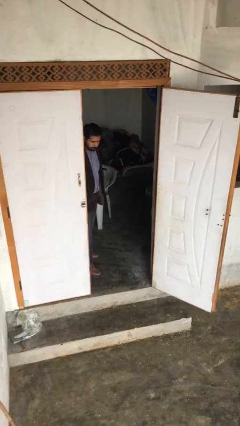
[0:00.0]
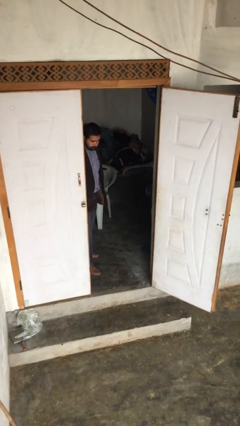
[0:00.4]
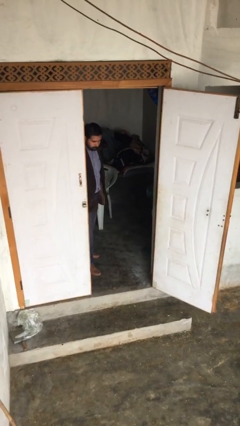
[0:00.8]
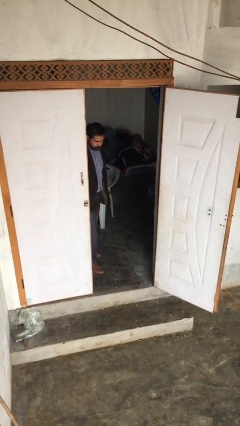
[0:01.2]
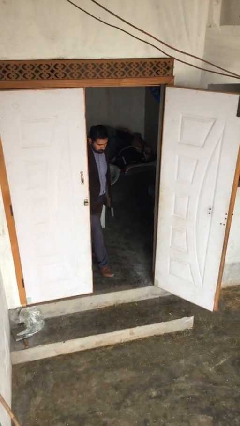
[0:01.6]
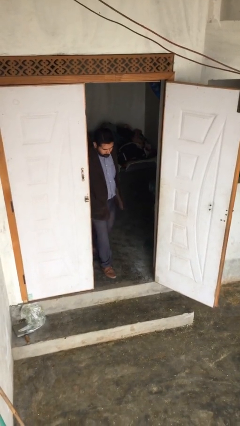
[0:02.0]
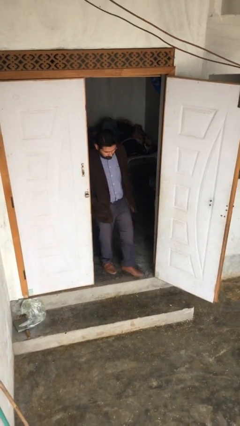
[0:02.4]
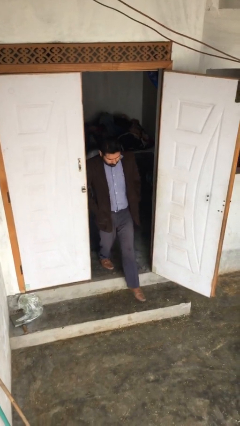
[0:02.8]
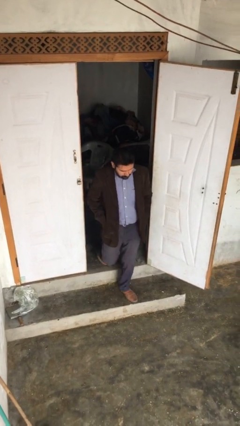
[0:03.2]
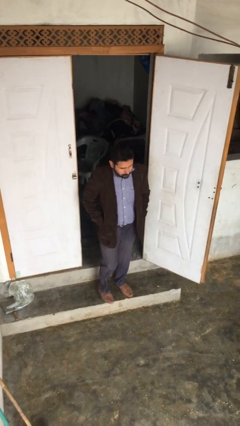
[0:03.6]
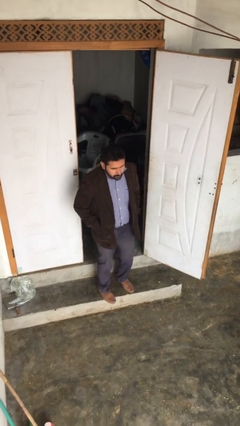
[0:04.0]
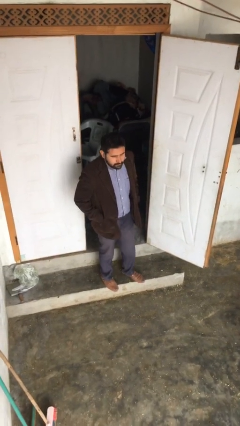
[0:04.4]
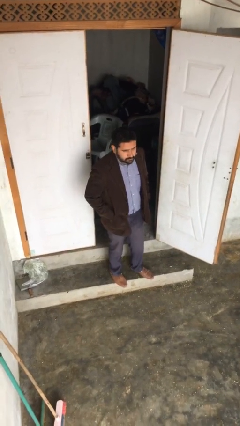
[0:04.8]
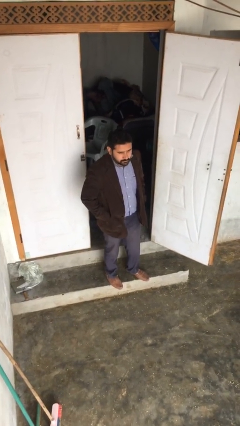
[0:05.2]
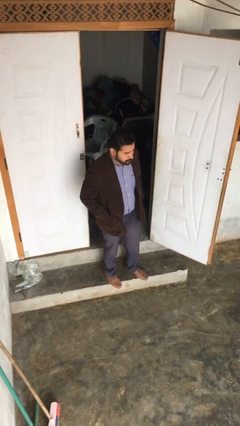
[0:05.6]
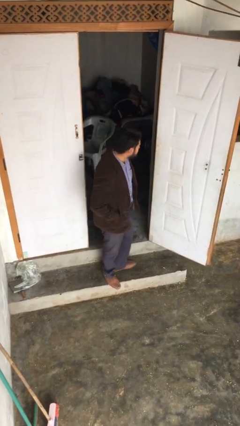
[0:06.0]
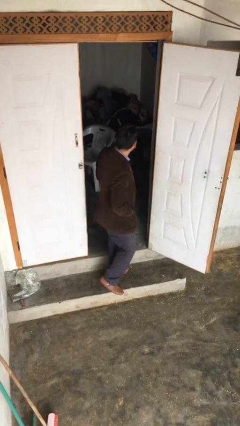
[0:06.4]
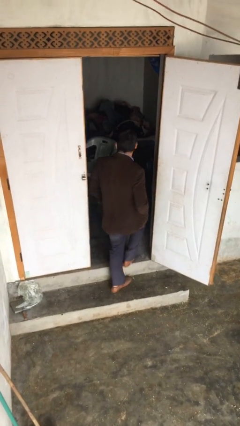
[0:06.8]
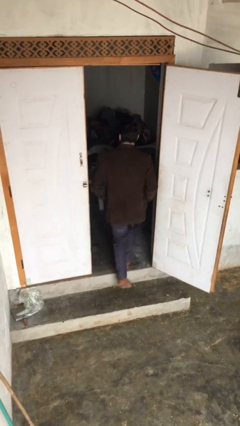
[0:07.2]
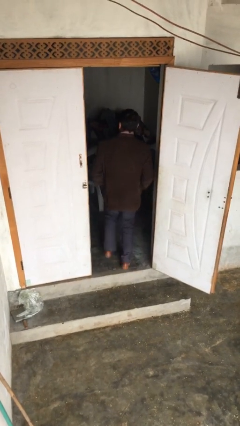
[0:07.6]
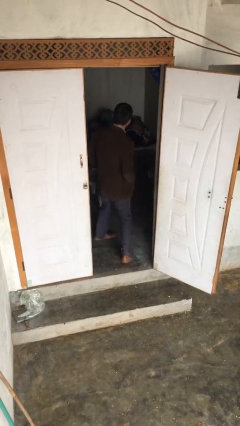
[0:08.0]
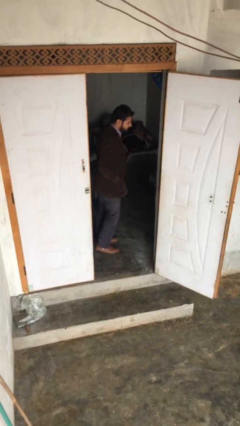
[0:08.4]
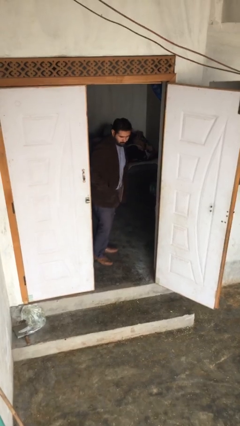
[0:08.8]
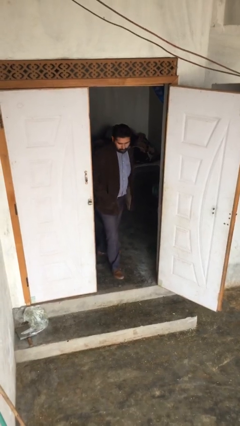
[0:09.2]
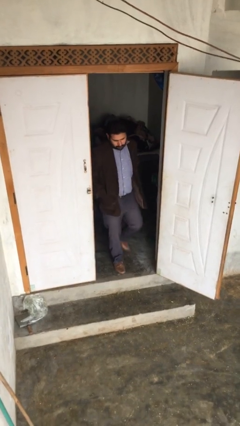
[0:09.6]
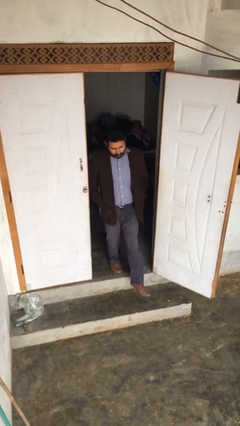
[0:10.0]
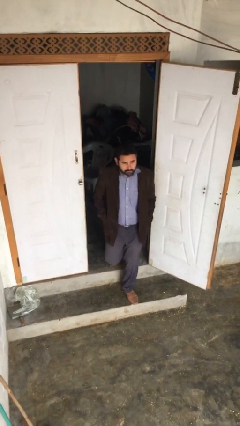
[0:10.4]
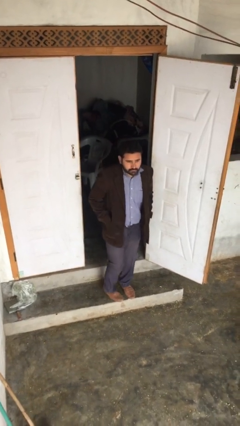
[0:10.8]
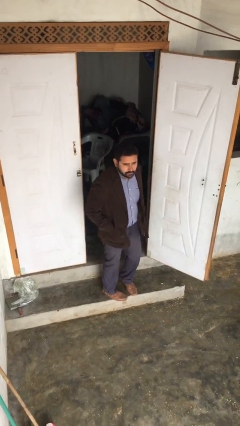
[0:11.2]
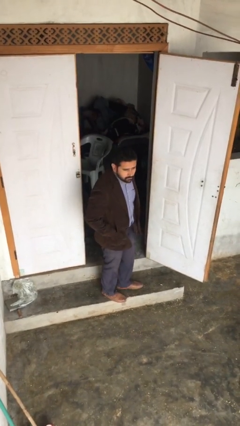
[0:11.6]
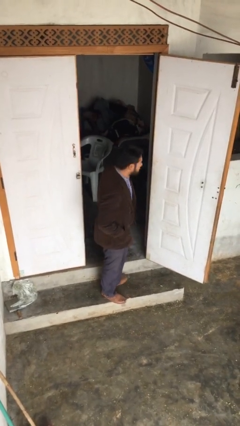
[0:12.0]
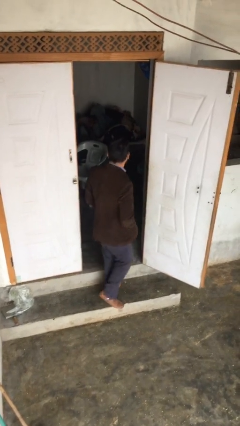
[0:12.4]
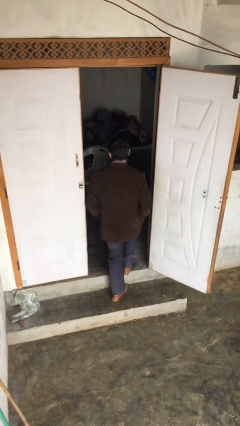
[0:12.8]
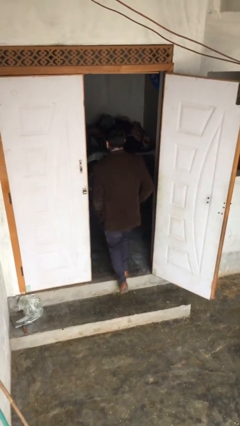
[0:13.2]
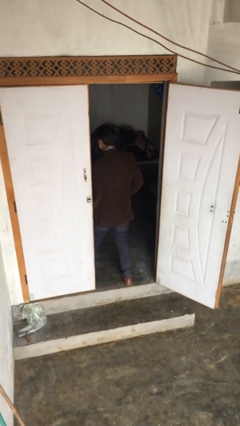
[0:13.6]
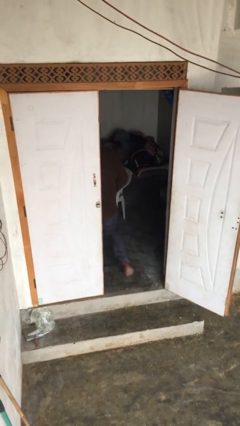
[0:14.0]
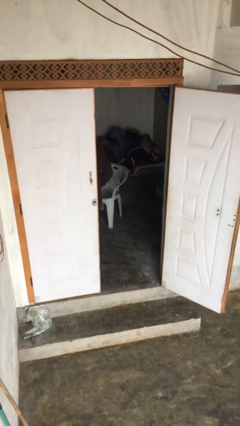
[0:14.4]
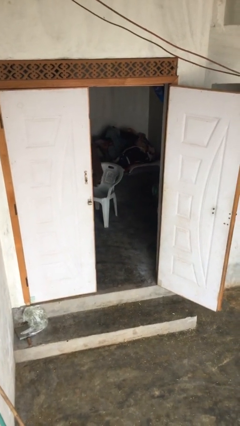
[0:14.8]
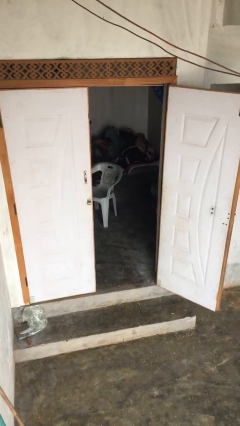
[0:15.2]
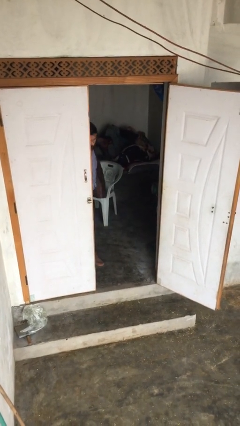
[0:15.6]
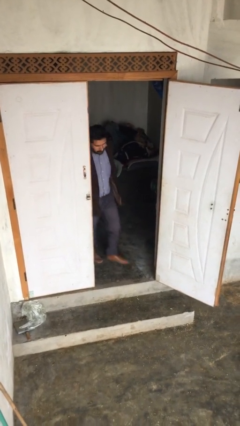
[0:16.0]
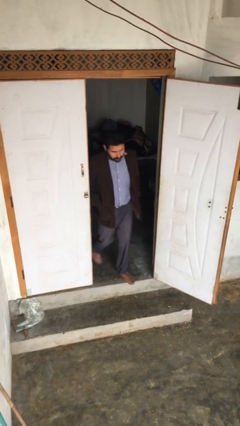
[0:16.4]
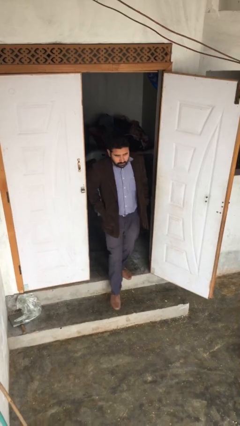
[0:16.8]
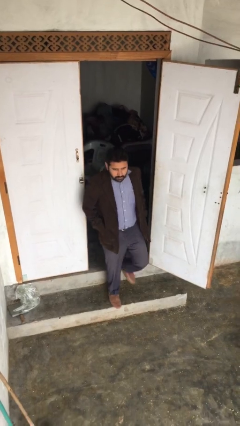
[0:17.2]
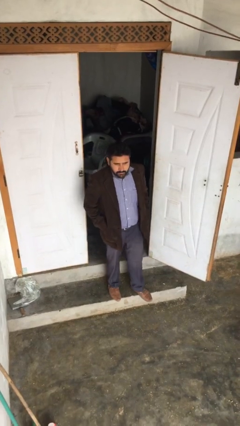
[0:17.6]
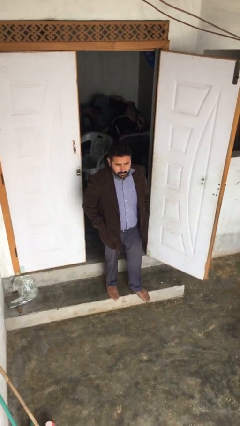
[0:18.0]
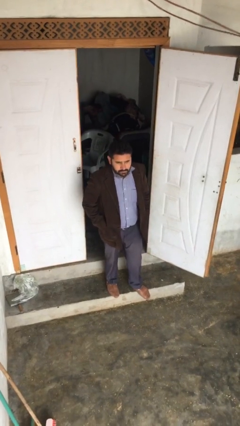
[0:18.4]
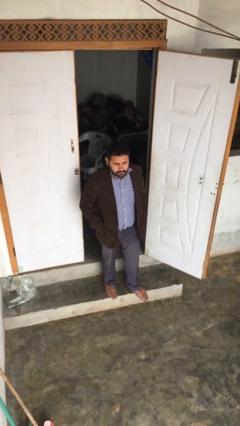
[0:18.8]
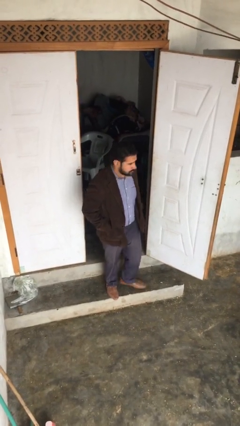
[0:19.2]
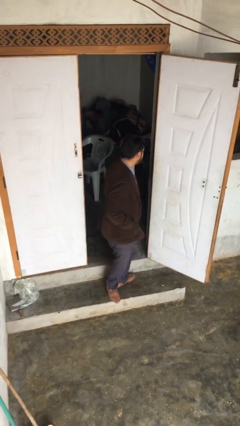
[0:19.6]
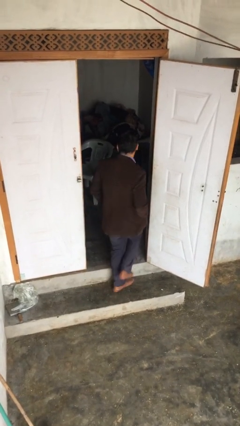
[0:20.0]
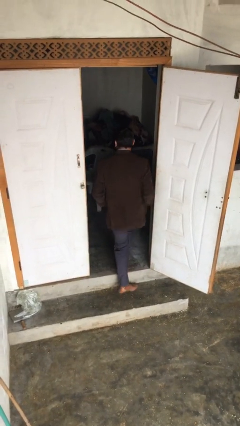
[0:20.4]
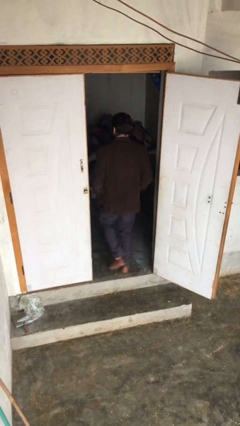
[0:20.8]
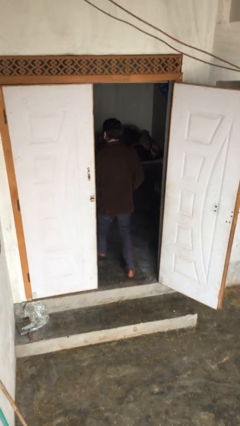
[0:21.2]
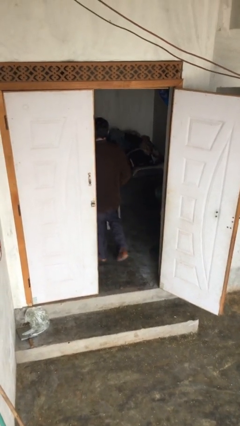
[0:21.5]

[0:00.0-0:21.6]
person texts on phone

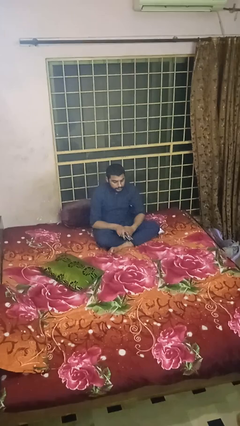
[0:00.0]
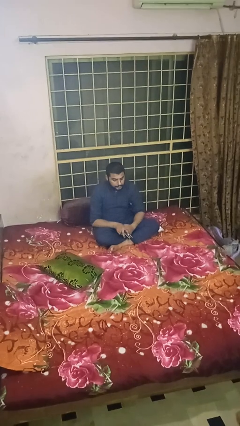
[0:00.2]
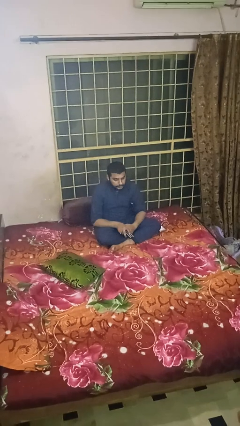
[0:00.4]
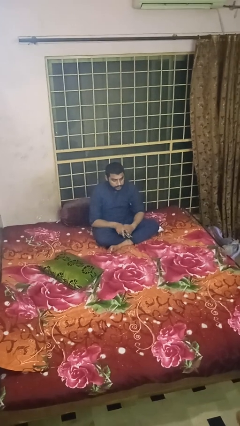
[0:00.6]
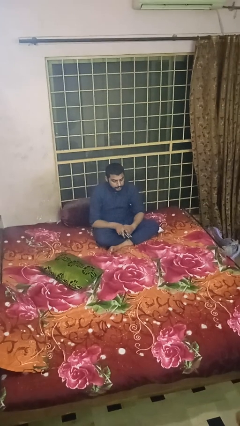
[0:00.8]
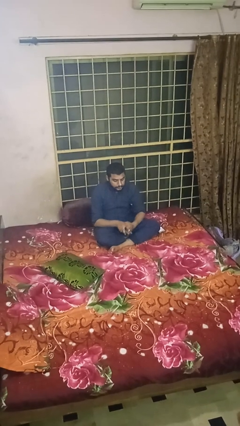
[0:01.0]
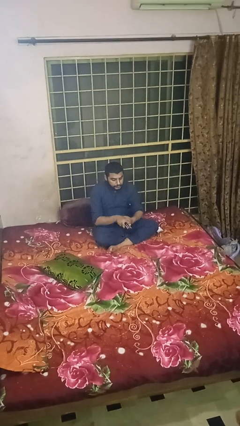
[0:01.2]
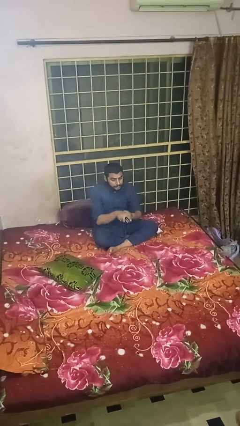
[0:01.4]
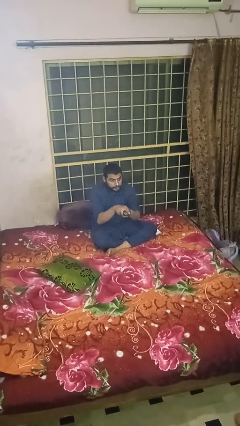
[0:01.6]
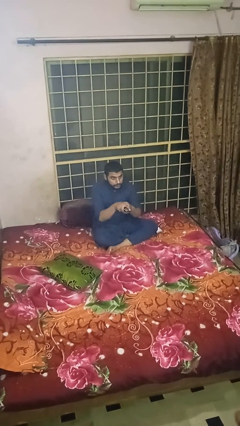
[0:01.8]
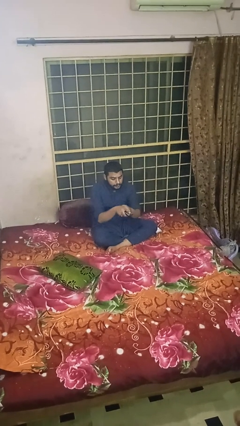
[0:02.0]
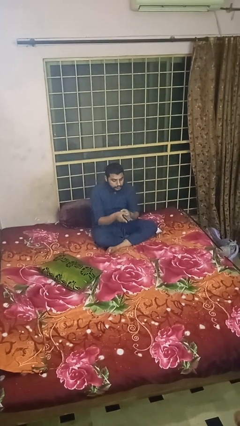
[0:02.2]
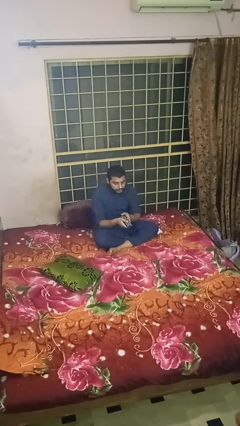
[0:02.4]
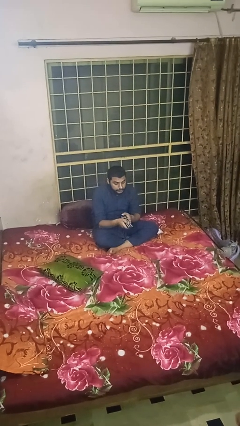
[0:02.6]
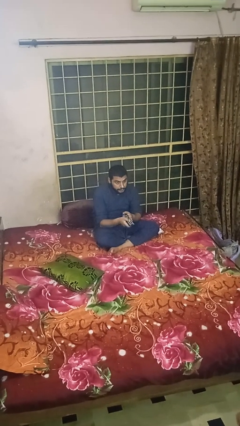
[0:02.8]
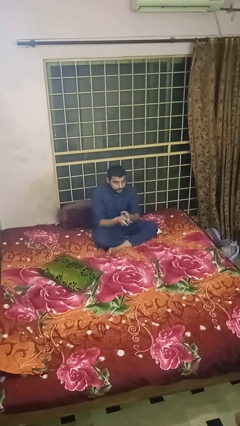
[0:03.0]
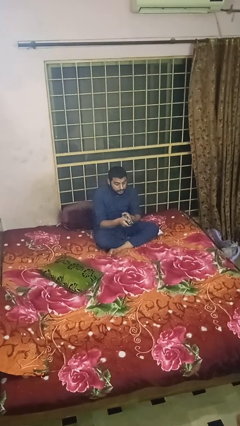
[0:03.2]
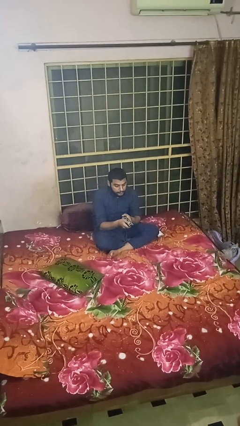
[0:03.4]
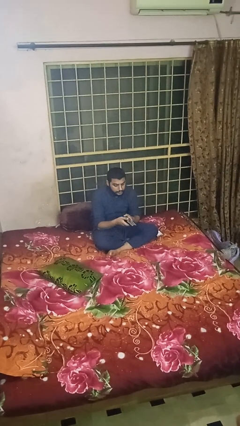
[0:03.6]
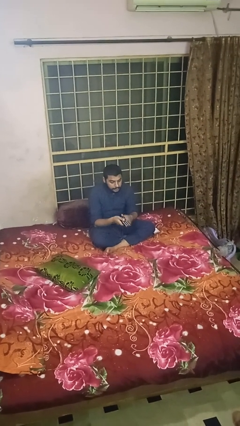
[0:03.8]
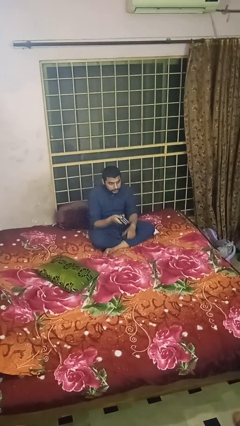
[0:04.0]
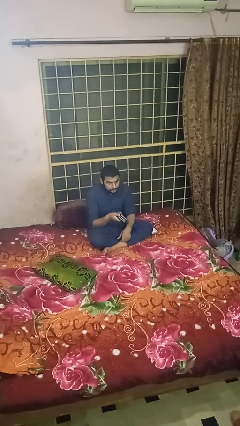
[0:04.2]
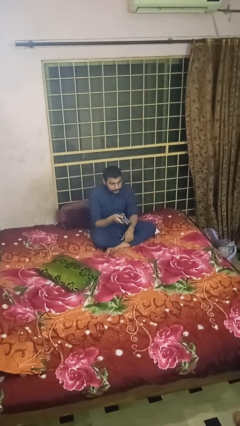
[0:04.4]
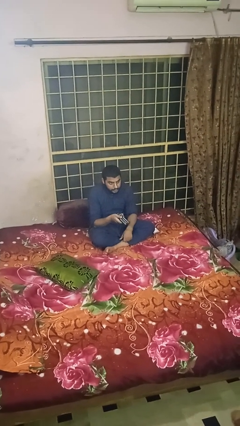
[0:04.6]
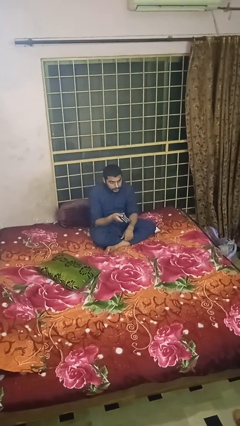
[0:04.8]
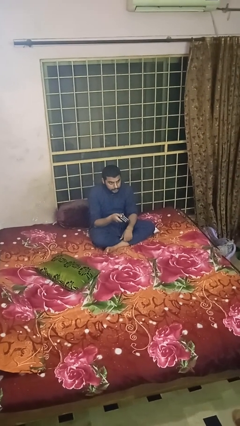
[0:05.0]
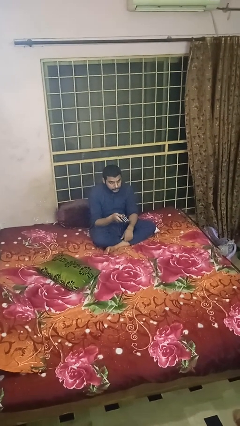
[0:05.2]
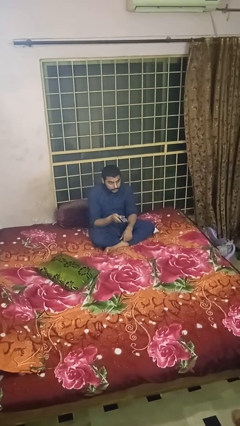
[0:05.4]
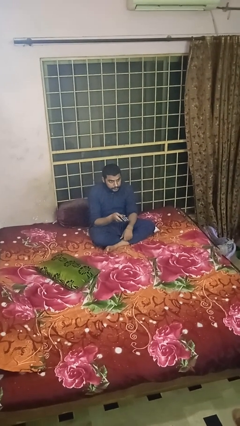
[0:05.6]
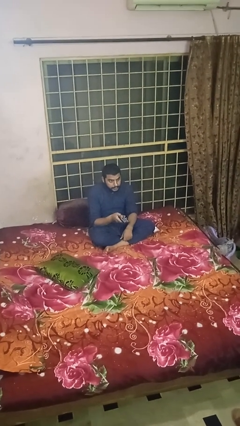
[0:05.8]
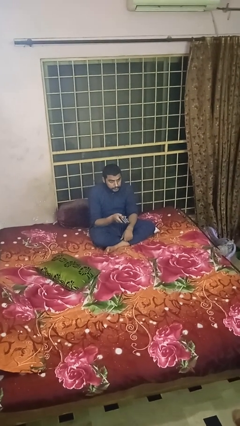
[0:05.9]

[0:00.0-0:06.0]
person uses television remote

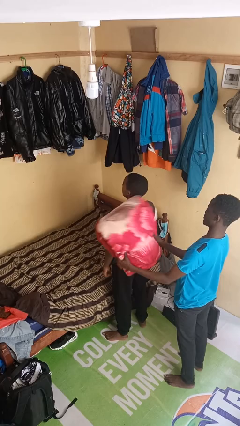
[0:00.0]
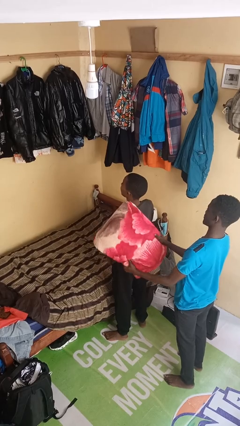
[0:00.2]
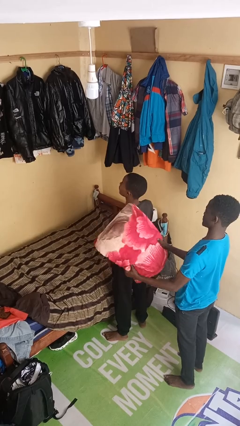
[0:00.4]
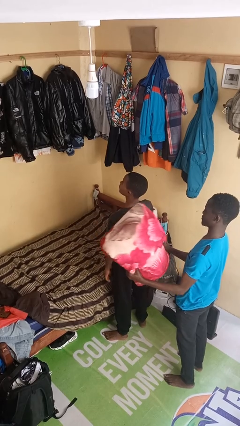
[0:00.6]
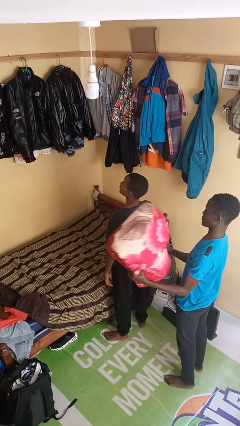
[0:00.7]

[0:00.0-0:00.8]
person hits person with pillow

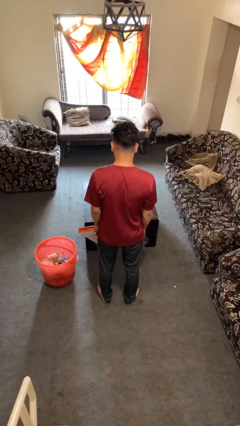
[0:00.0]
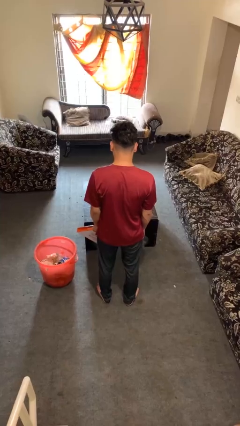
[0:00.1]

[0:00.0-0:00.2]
person puts object into basket
